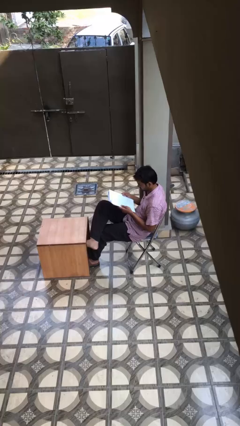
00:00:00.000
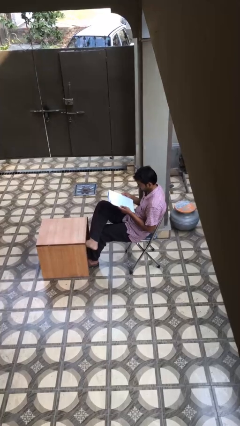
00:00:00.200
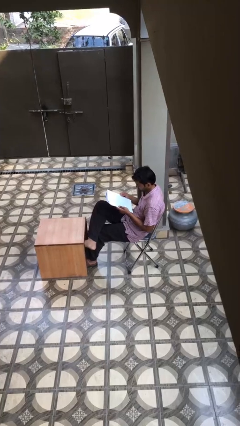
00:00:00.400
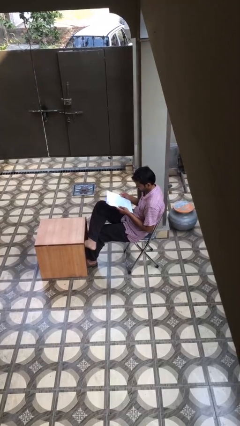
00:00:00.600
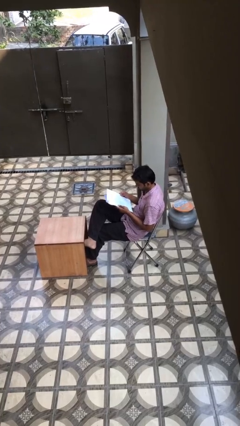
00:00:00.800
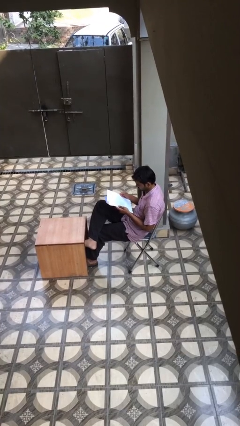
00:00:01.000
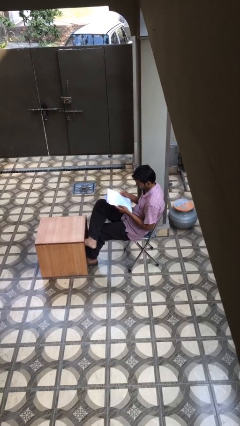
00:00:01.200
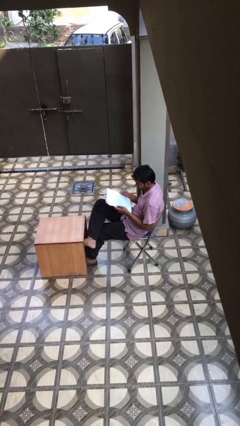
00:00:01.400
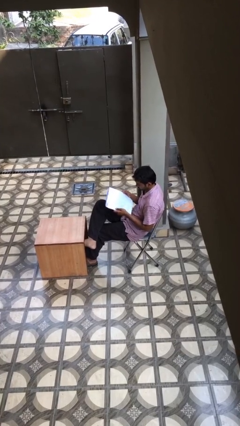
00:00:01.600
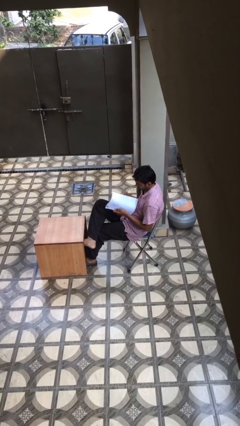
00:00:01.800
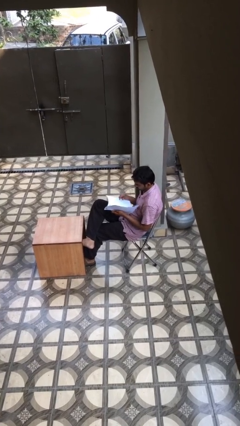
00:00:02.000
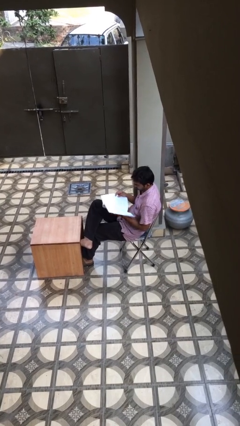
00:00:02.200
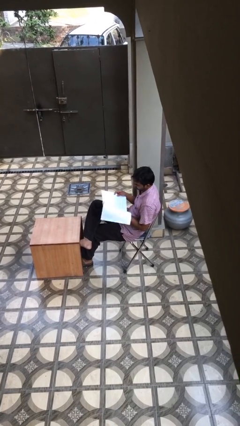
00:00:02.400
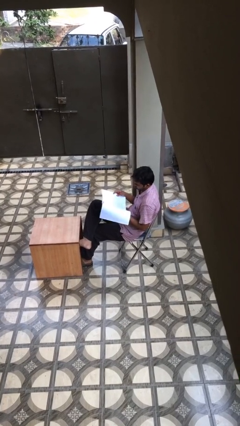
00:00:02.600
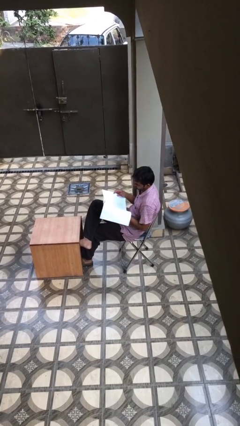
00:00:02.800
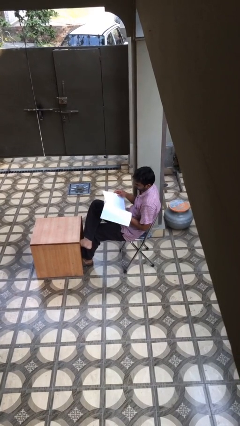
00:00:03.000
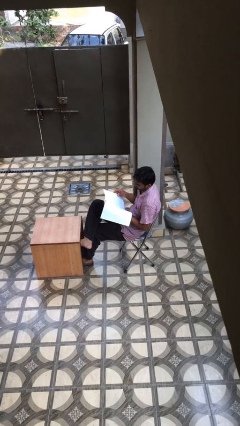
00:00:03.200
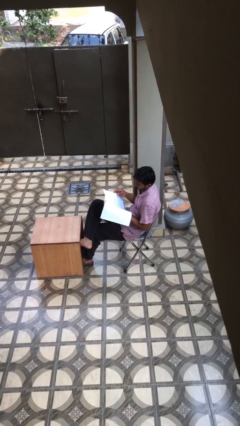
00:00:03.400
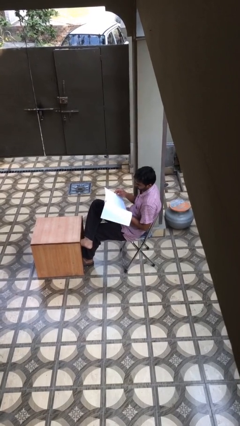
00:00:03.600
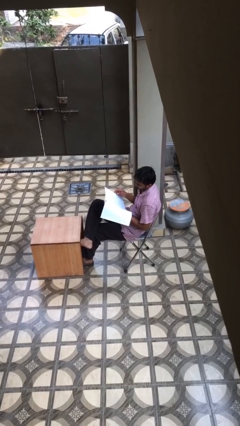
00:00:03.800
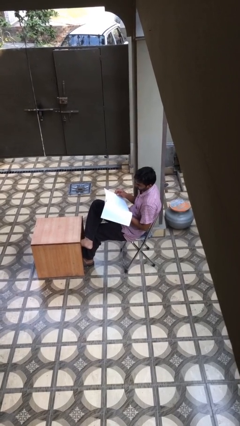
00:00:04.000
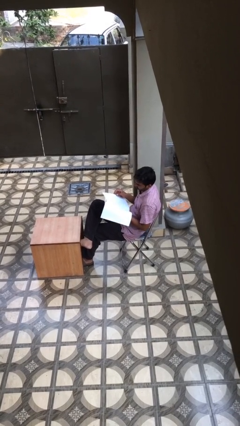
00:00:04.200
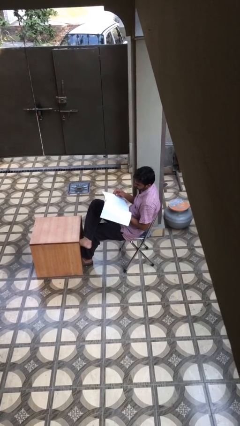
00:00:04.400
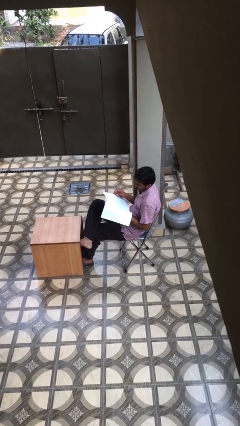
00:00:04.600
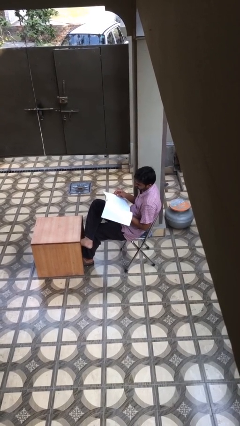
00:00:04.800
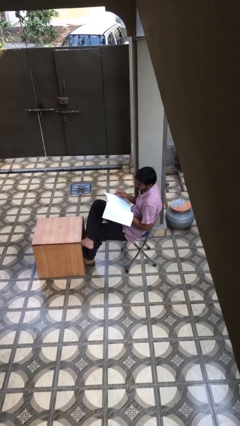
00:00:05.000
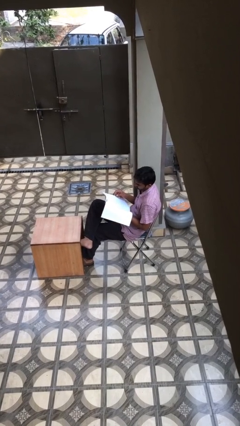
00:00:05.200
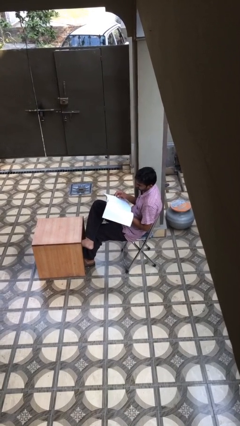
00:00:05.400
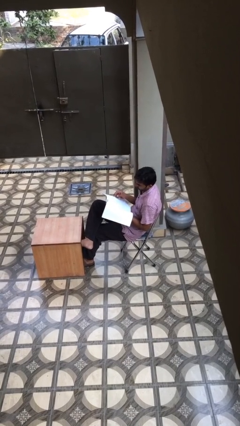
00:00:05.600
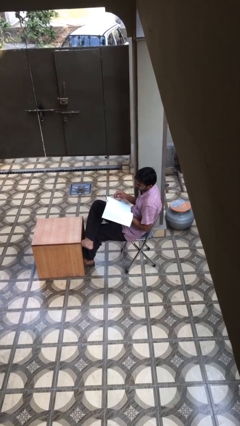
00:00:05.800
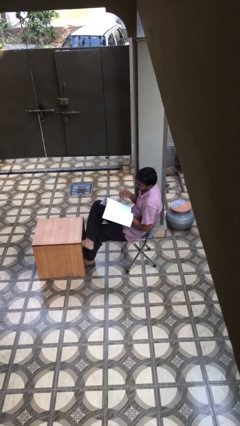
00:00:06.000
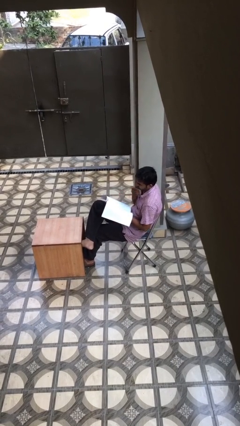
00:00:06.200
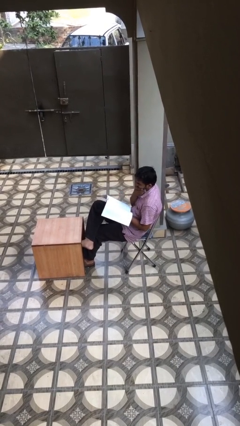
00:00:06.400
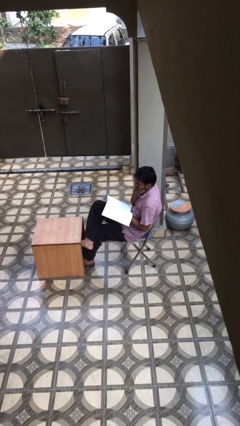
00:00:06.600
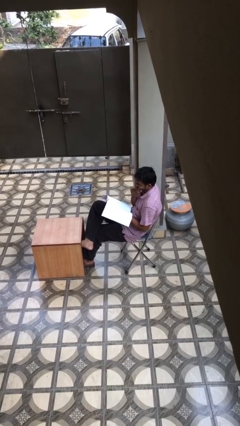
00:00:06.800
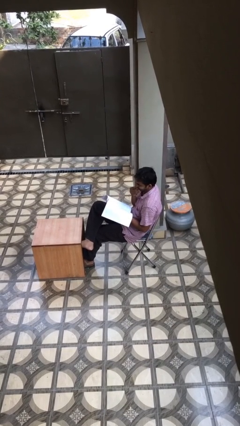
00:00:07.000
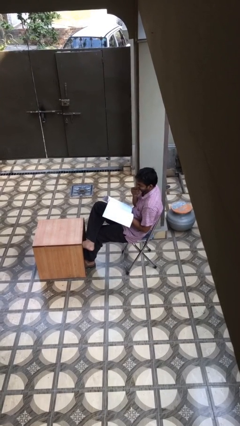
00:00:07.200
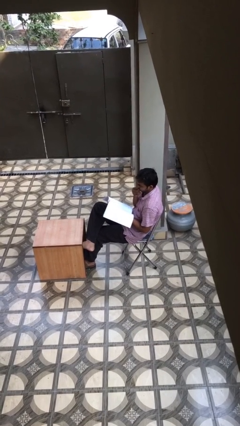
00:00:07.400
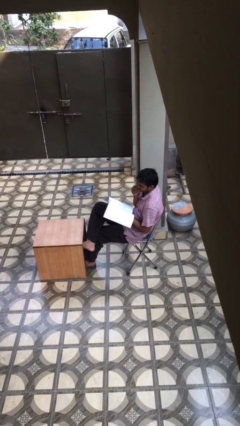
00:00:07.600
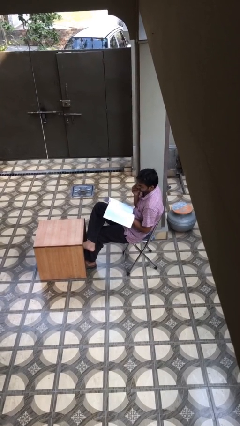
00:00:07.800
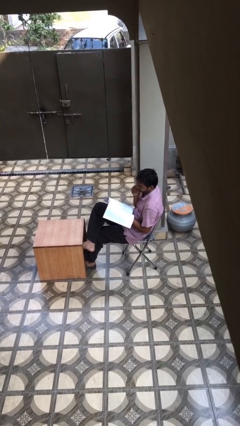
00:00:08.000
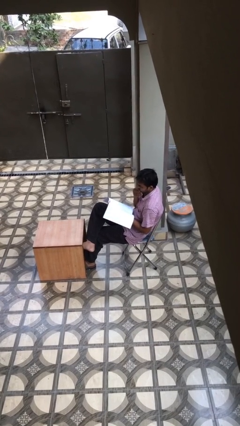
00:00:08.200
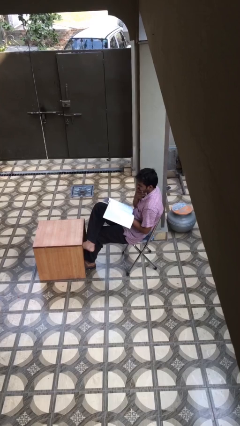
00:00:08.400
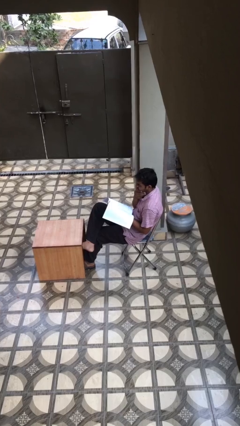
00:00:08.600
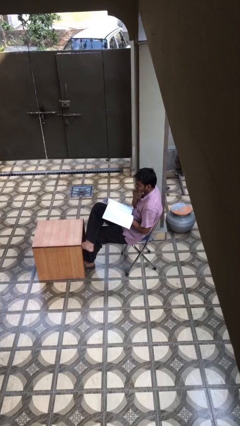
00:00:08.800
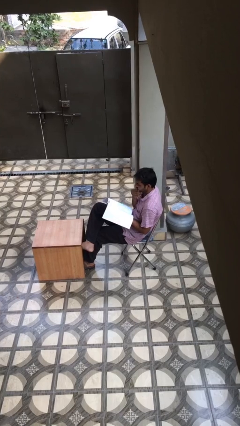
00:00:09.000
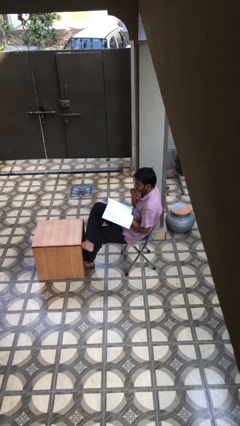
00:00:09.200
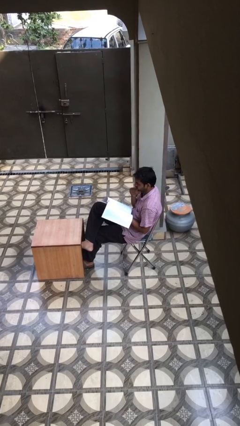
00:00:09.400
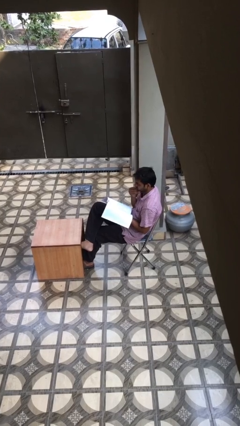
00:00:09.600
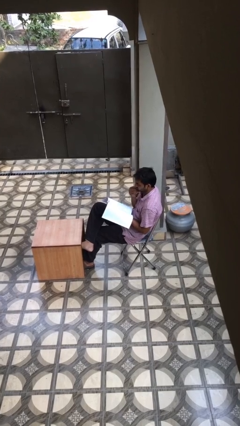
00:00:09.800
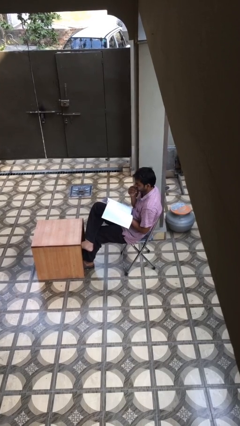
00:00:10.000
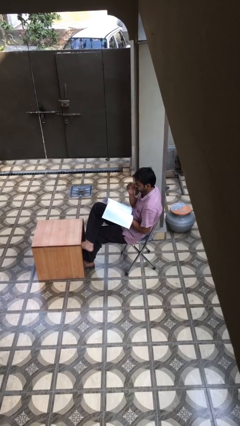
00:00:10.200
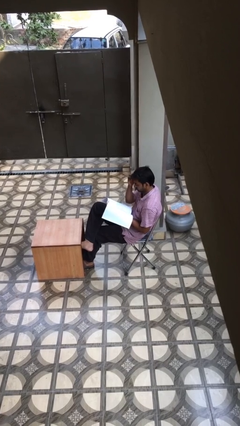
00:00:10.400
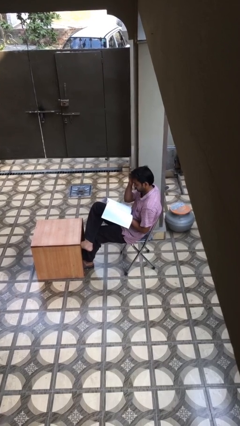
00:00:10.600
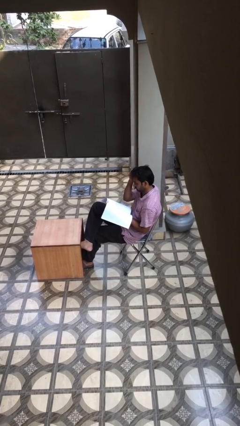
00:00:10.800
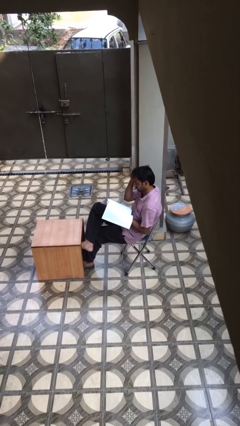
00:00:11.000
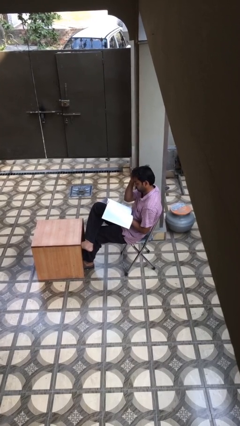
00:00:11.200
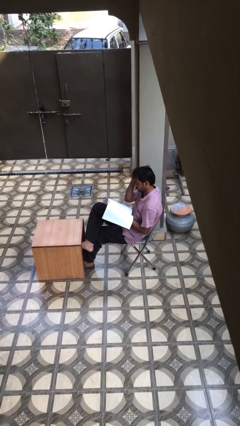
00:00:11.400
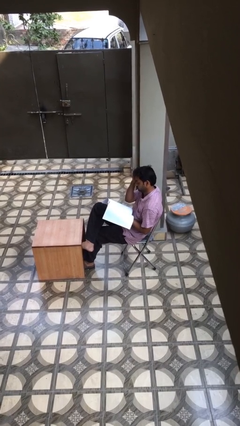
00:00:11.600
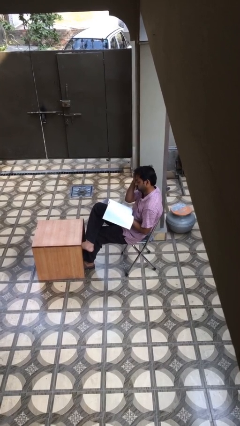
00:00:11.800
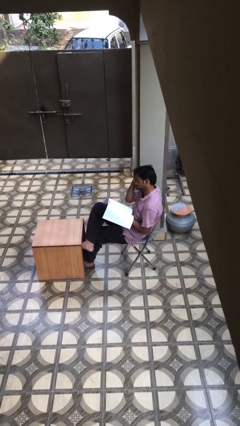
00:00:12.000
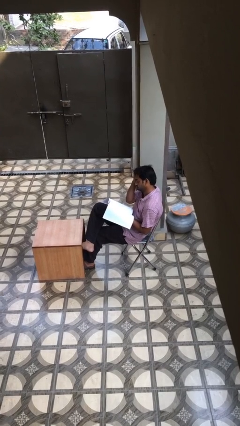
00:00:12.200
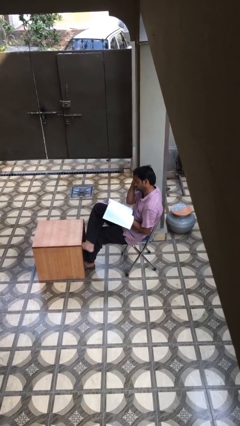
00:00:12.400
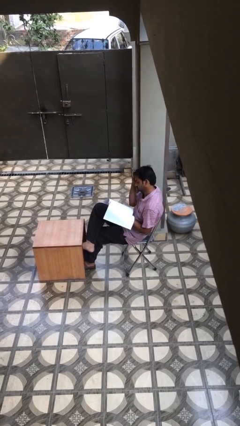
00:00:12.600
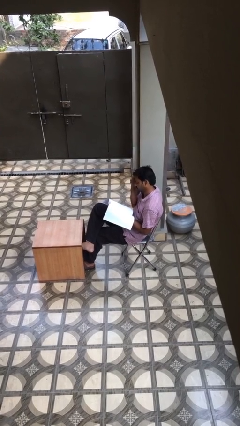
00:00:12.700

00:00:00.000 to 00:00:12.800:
person reads document

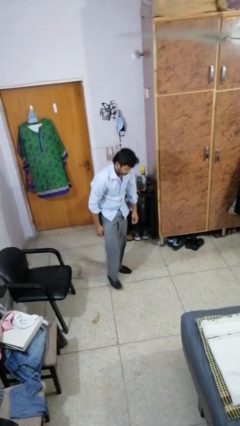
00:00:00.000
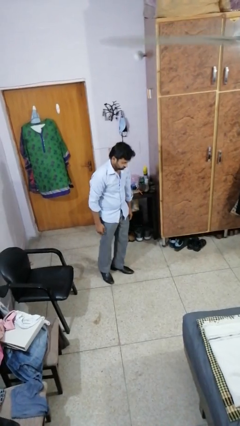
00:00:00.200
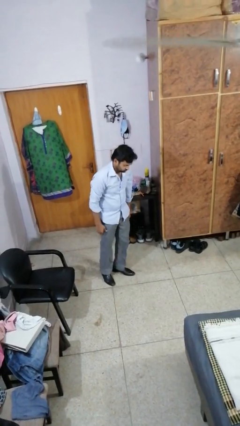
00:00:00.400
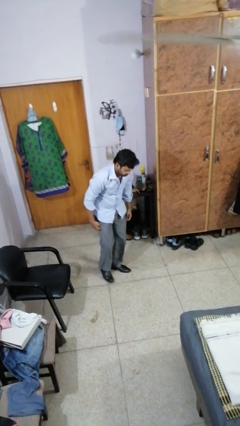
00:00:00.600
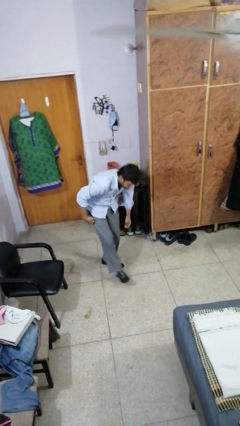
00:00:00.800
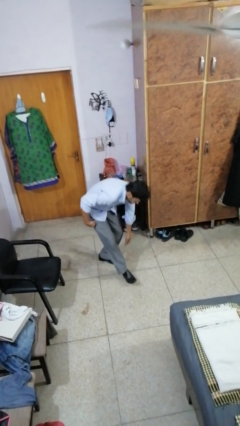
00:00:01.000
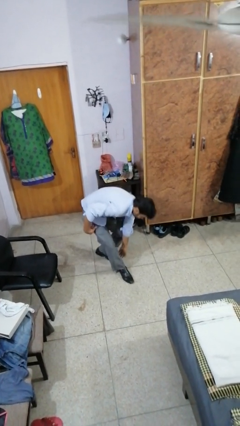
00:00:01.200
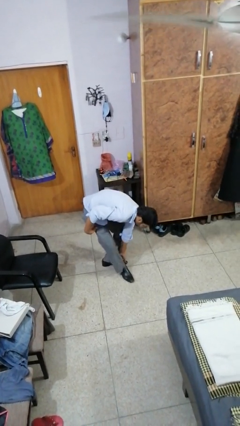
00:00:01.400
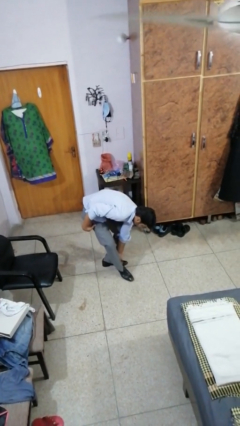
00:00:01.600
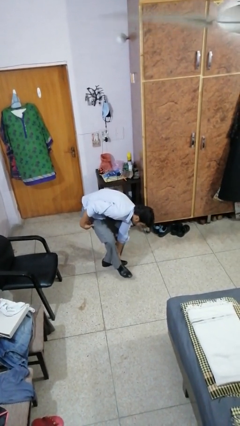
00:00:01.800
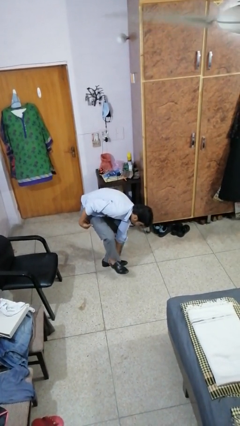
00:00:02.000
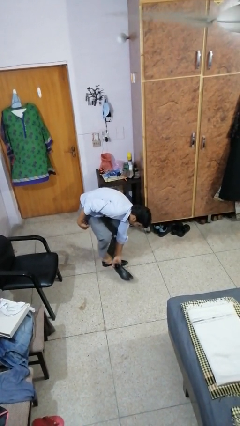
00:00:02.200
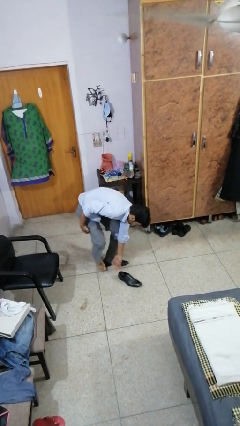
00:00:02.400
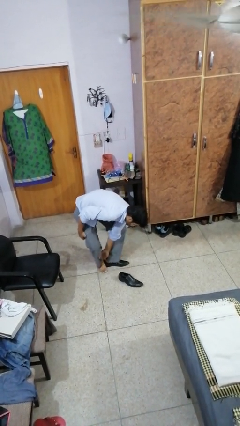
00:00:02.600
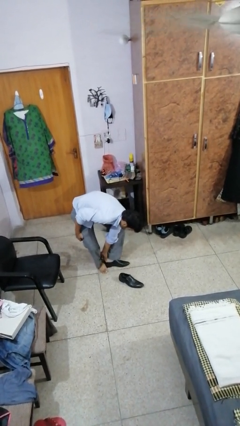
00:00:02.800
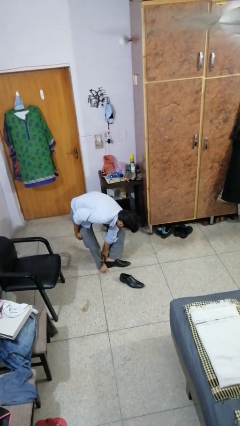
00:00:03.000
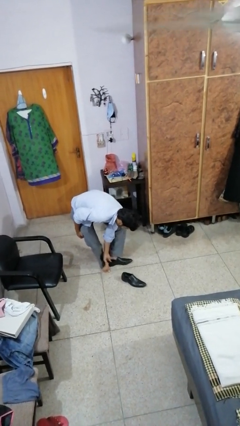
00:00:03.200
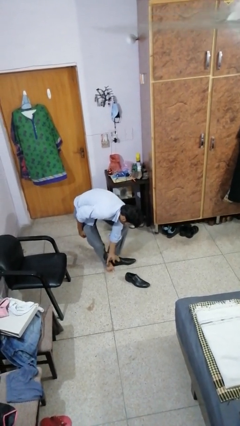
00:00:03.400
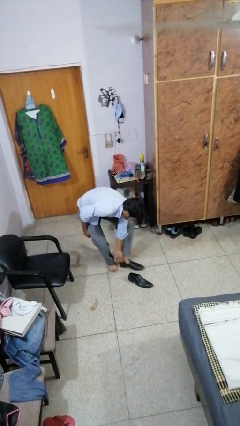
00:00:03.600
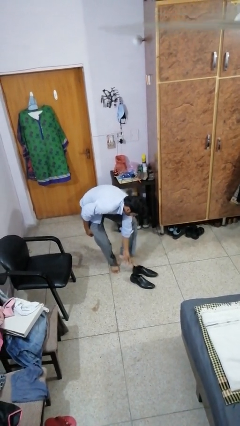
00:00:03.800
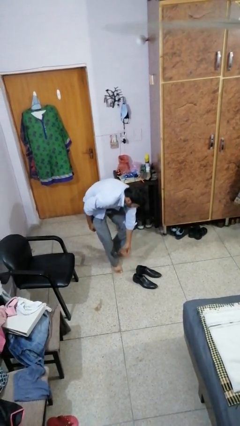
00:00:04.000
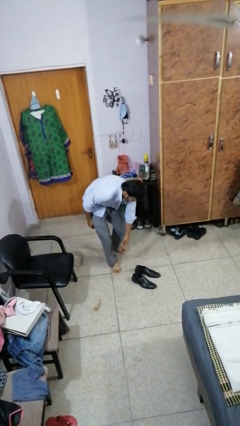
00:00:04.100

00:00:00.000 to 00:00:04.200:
person takes off shoes

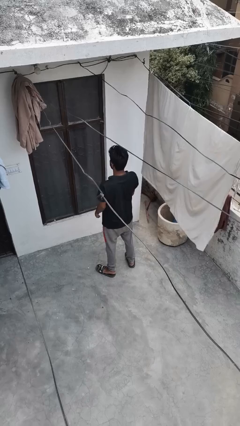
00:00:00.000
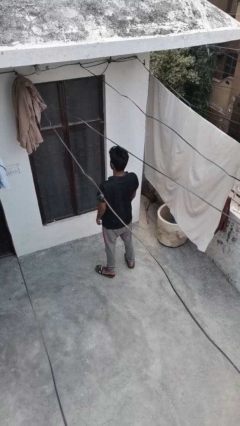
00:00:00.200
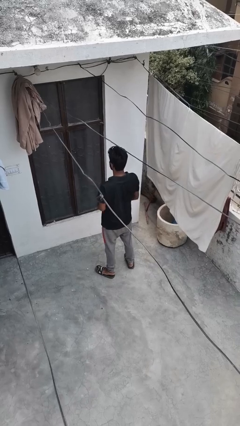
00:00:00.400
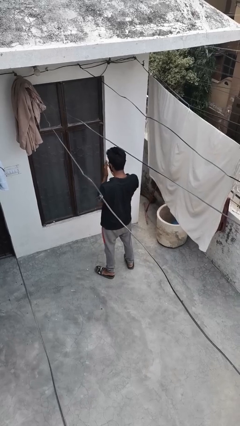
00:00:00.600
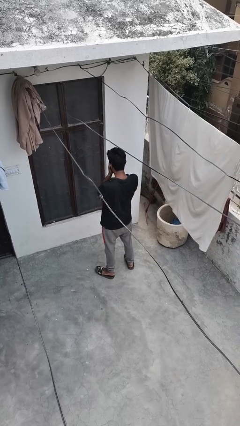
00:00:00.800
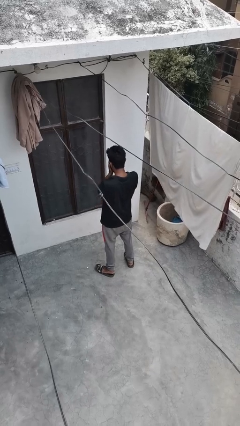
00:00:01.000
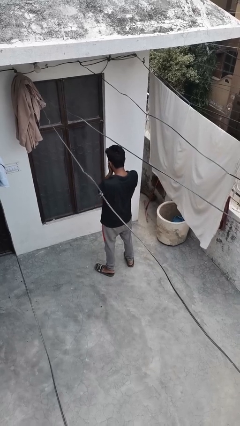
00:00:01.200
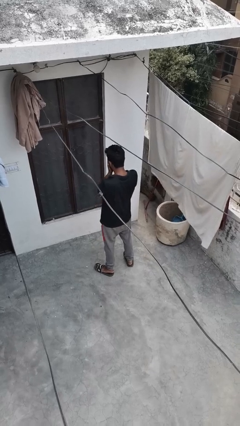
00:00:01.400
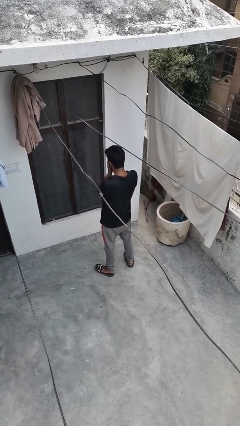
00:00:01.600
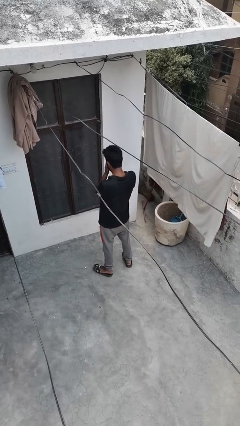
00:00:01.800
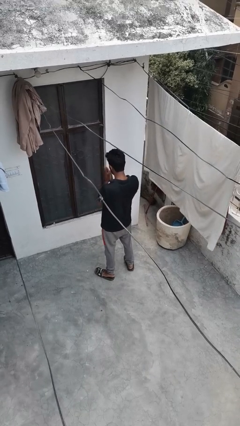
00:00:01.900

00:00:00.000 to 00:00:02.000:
person covers face with hands
